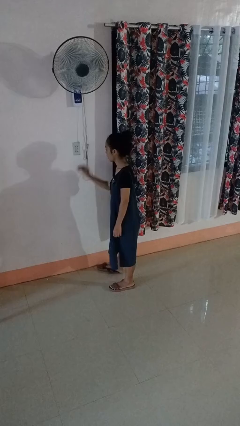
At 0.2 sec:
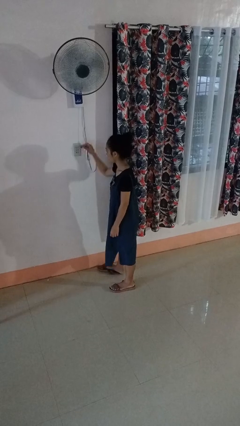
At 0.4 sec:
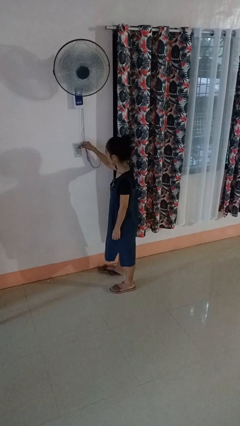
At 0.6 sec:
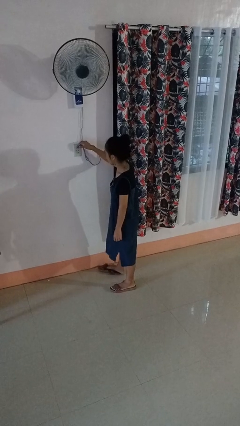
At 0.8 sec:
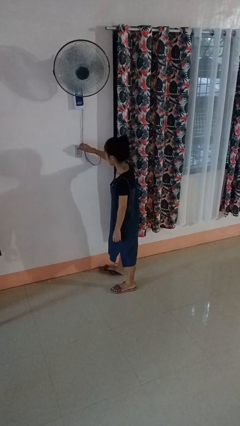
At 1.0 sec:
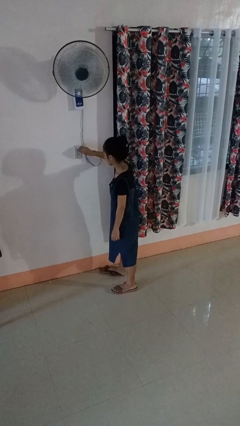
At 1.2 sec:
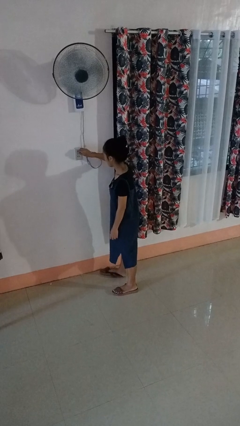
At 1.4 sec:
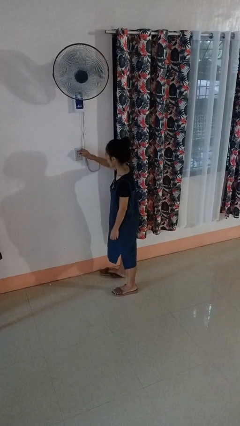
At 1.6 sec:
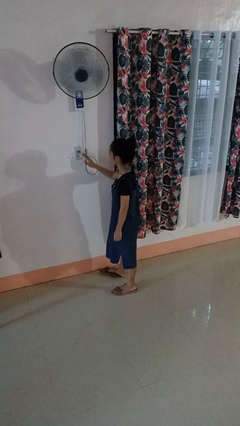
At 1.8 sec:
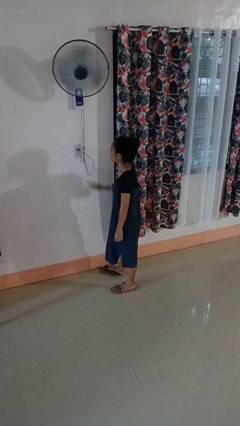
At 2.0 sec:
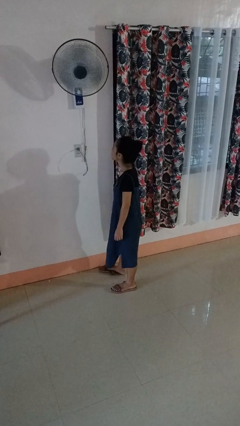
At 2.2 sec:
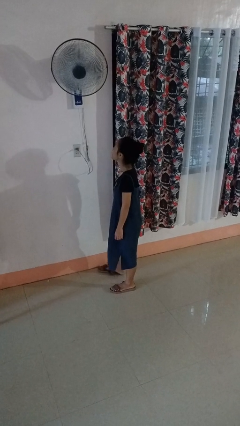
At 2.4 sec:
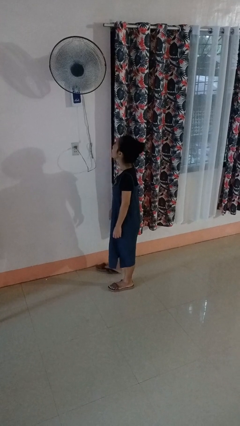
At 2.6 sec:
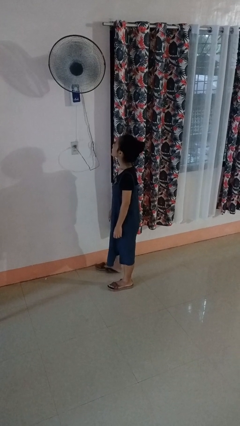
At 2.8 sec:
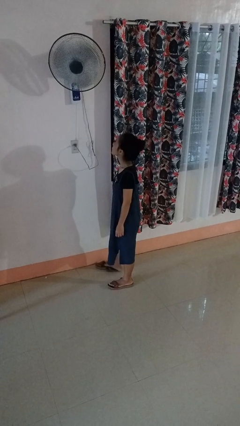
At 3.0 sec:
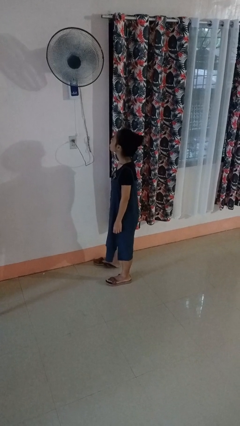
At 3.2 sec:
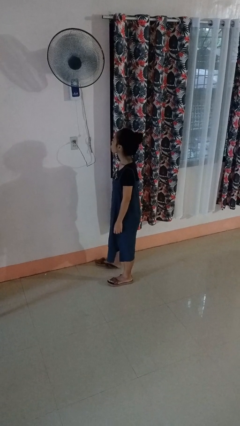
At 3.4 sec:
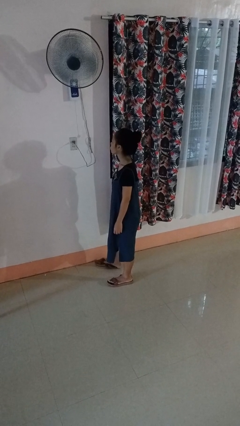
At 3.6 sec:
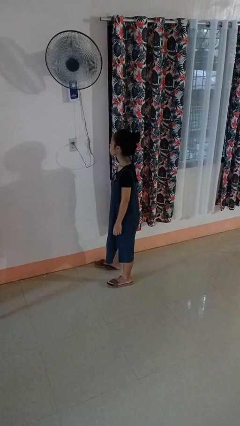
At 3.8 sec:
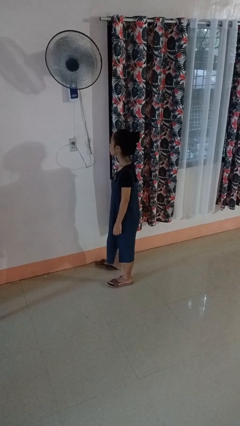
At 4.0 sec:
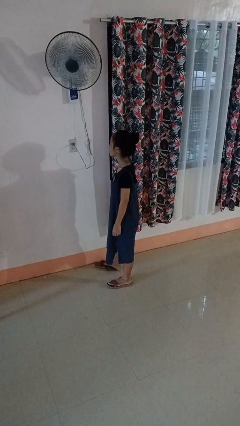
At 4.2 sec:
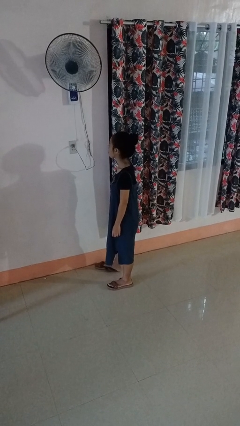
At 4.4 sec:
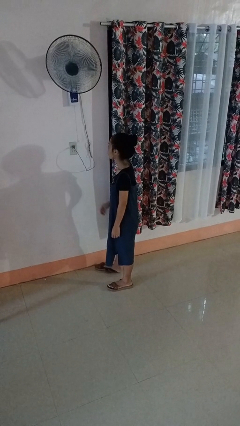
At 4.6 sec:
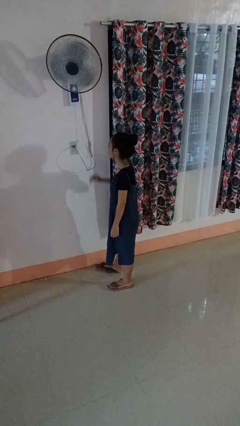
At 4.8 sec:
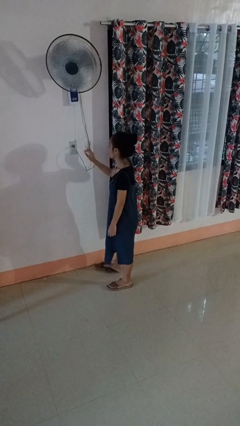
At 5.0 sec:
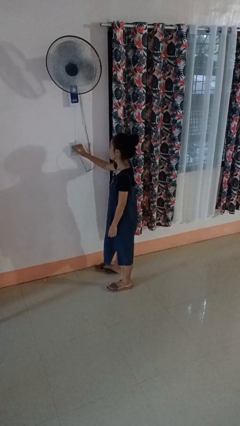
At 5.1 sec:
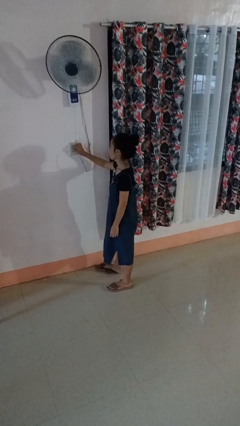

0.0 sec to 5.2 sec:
person plugs into electrical socket

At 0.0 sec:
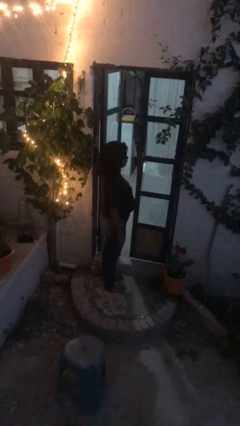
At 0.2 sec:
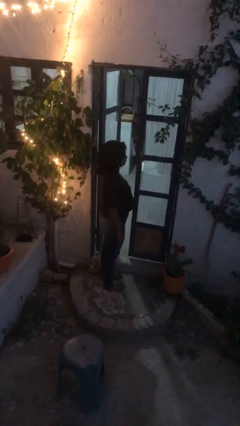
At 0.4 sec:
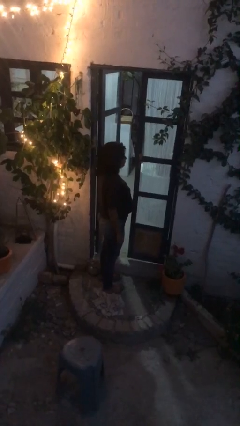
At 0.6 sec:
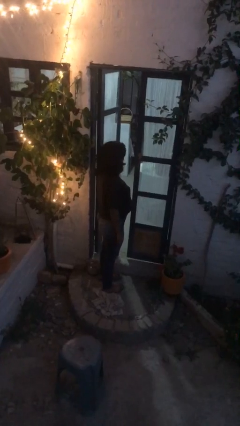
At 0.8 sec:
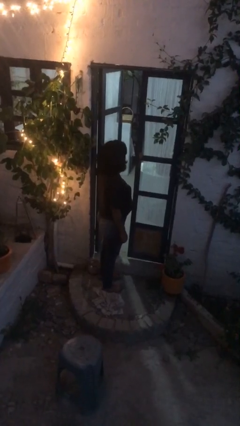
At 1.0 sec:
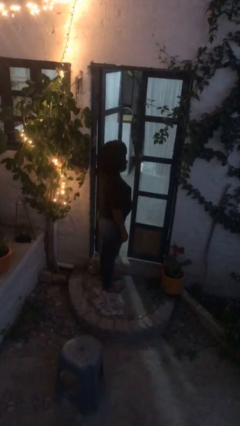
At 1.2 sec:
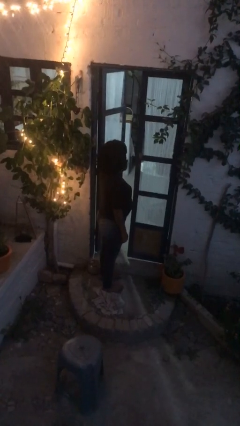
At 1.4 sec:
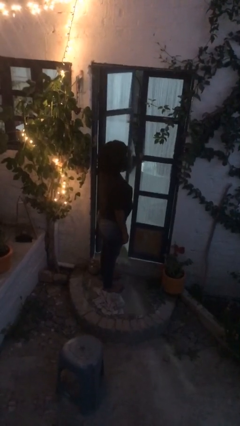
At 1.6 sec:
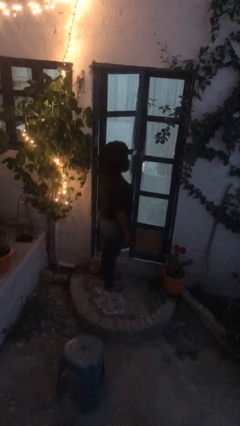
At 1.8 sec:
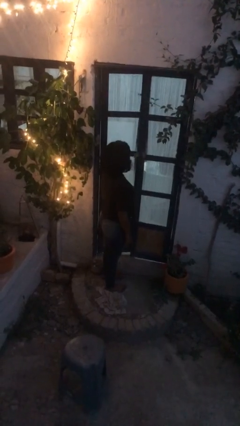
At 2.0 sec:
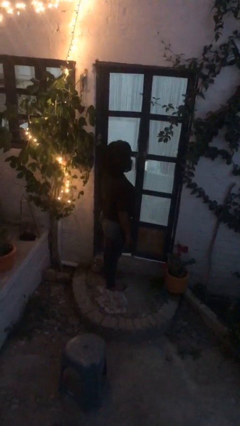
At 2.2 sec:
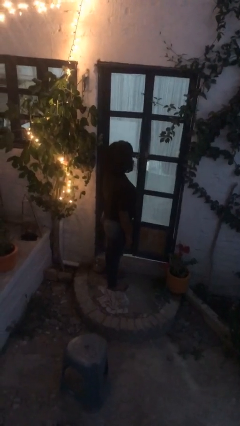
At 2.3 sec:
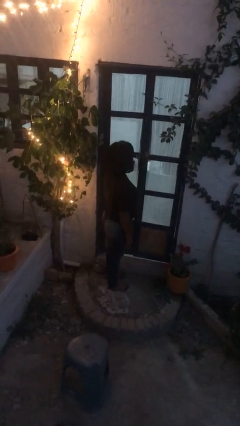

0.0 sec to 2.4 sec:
person closes facility door

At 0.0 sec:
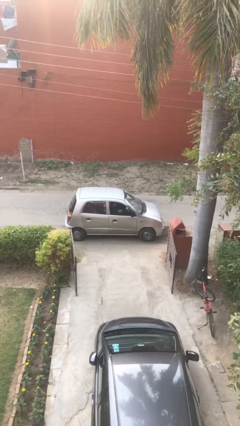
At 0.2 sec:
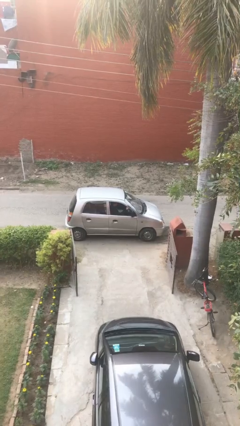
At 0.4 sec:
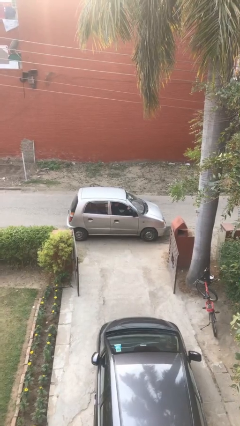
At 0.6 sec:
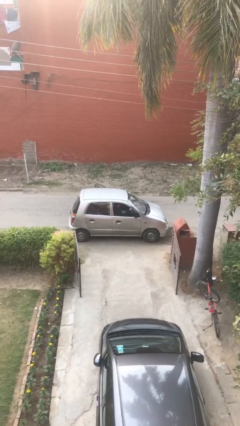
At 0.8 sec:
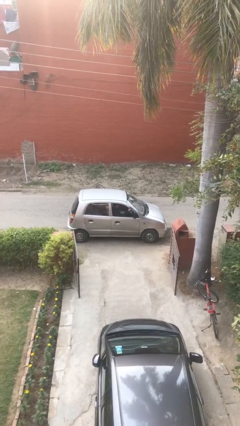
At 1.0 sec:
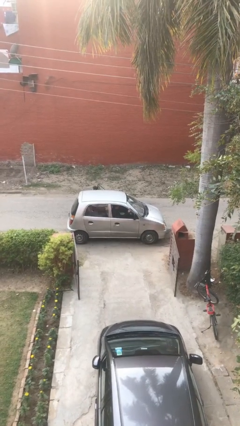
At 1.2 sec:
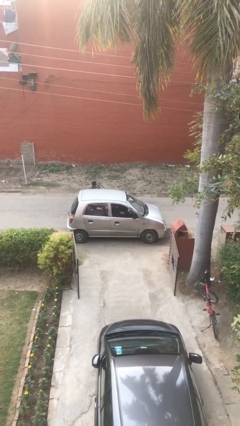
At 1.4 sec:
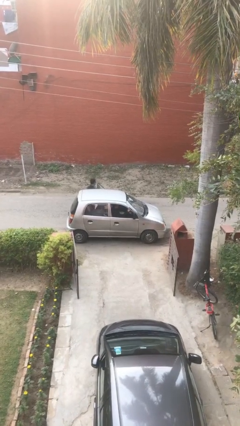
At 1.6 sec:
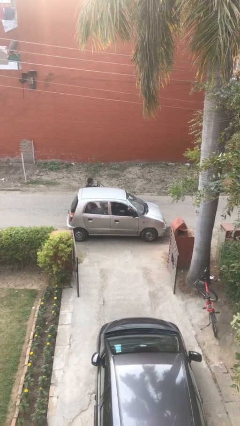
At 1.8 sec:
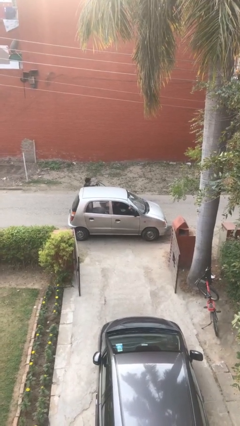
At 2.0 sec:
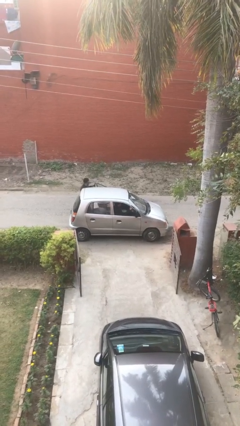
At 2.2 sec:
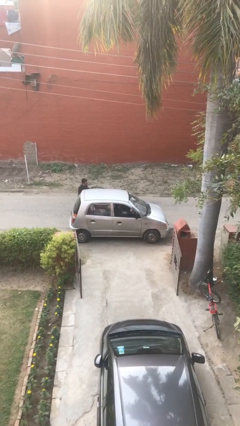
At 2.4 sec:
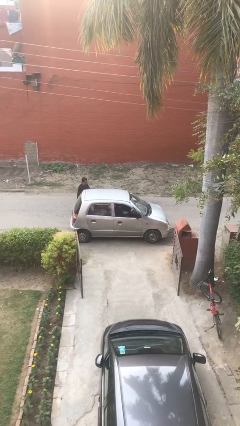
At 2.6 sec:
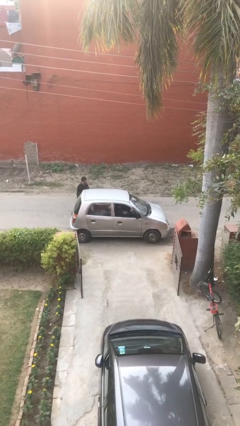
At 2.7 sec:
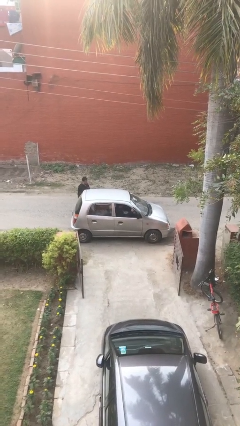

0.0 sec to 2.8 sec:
car drops off person

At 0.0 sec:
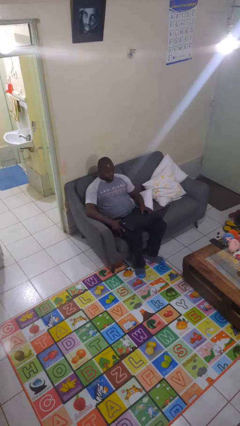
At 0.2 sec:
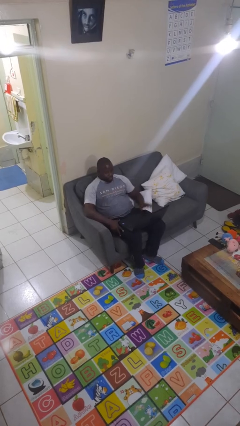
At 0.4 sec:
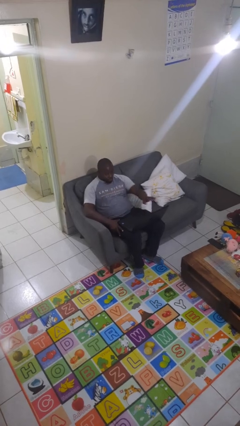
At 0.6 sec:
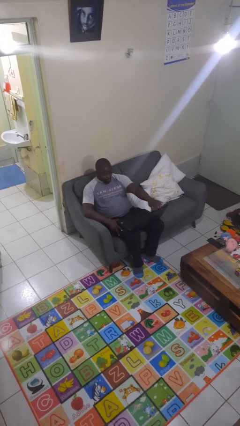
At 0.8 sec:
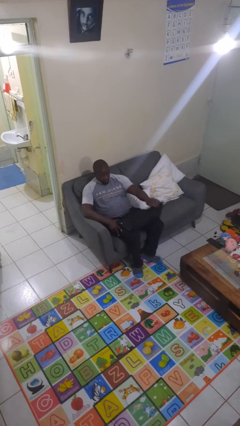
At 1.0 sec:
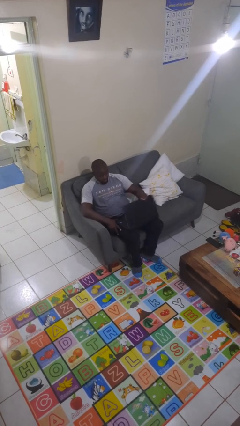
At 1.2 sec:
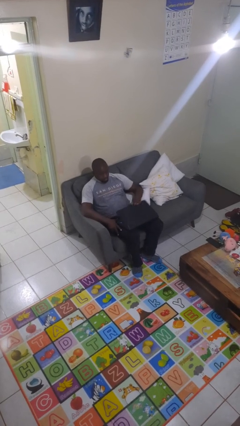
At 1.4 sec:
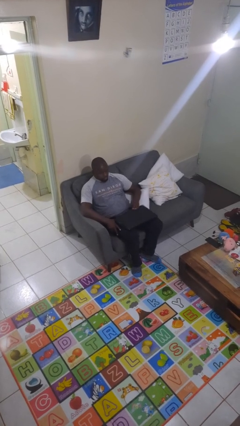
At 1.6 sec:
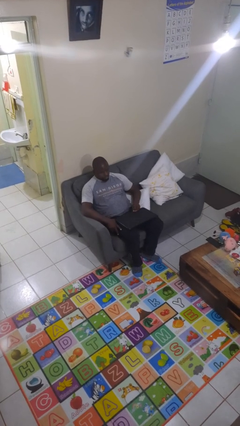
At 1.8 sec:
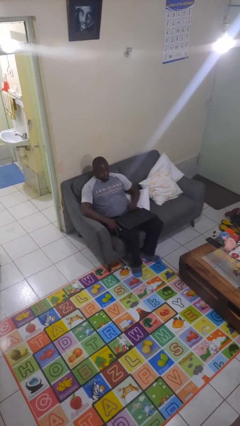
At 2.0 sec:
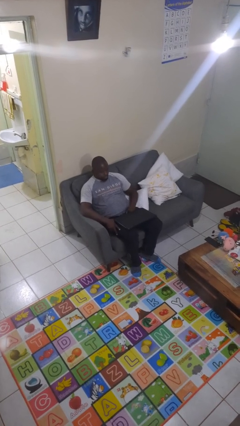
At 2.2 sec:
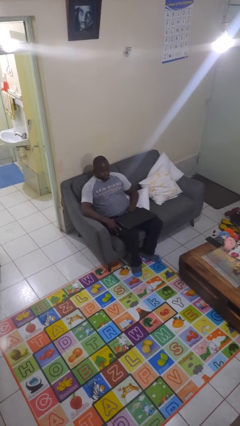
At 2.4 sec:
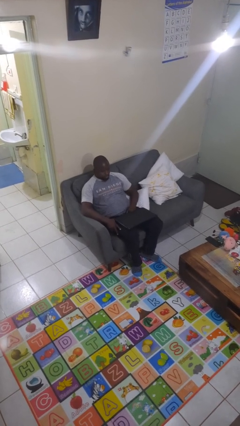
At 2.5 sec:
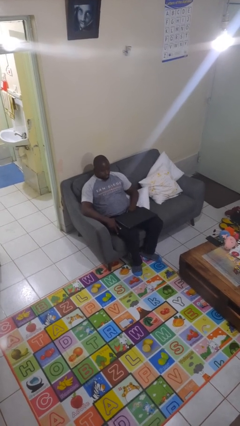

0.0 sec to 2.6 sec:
person closes laptop

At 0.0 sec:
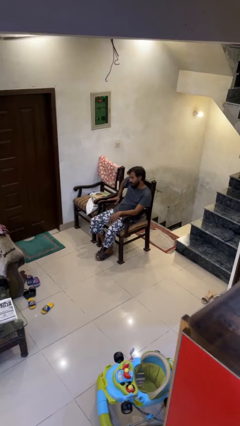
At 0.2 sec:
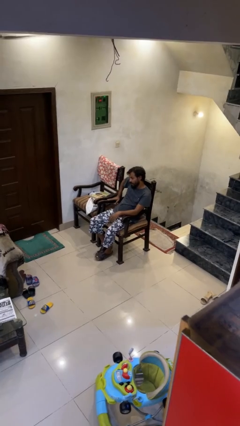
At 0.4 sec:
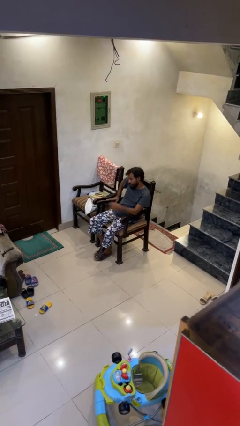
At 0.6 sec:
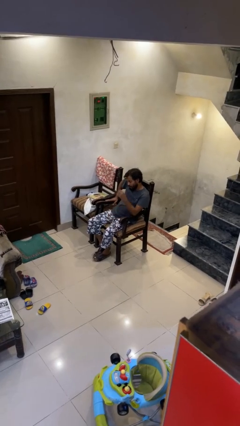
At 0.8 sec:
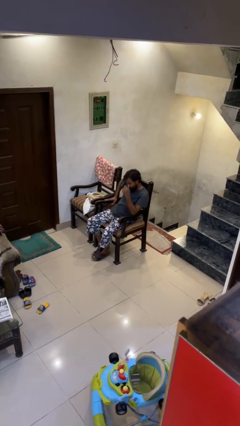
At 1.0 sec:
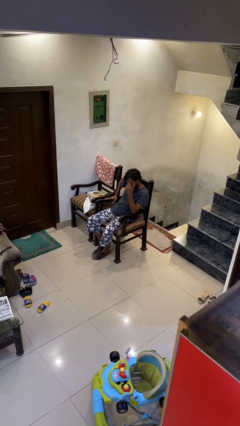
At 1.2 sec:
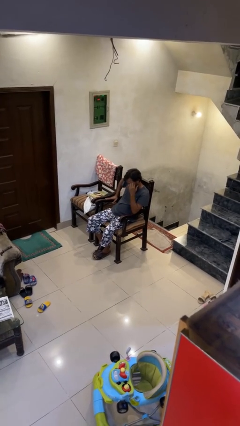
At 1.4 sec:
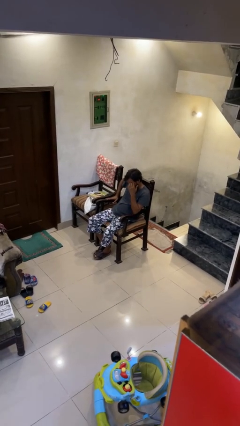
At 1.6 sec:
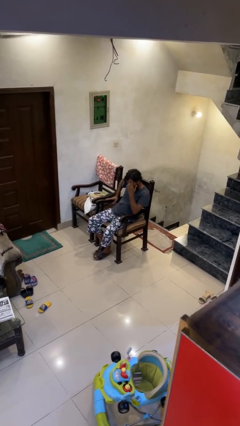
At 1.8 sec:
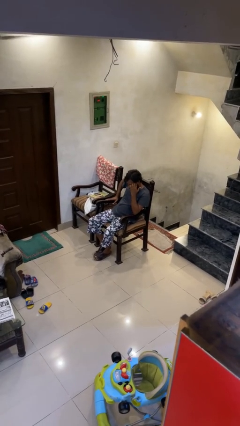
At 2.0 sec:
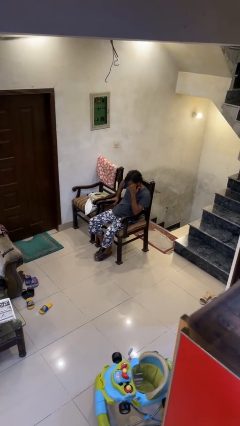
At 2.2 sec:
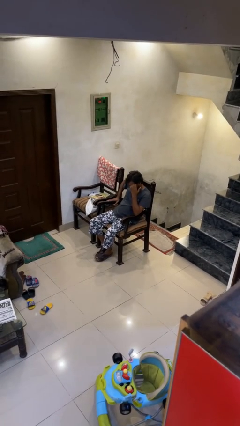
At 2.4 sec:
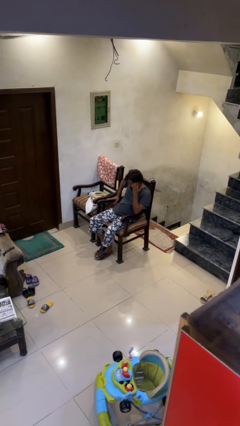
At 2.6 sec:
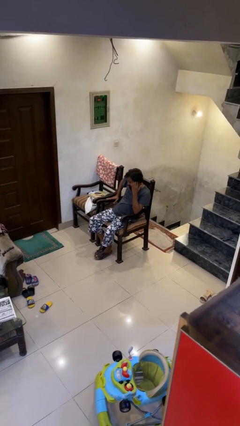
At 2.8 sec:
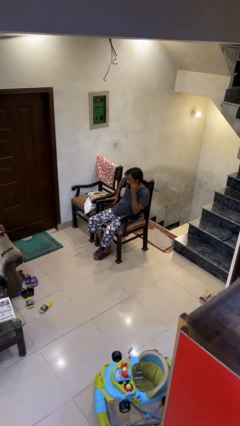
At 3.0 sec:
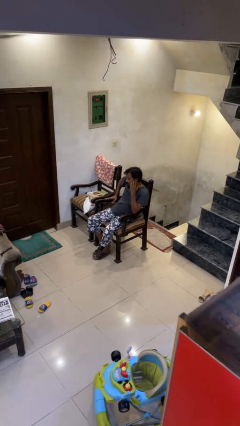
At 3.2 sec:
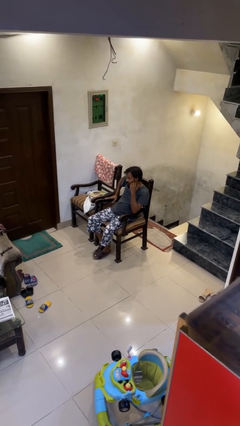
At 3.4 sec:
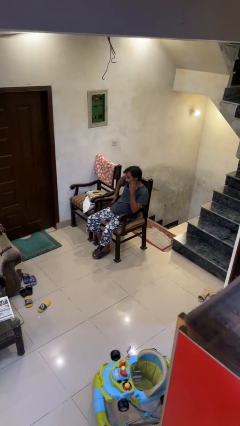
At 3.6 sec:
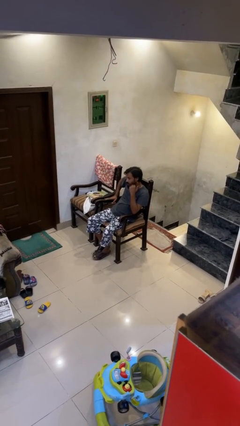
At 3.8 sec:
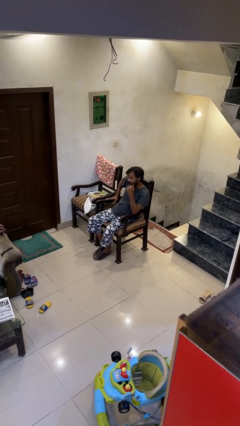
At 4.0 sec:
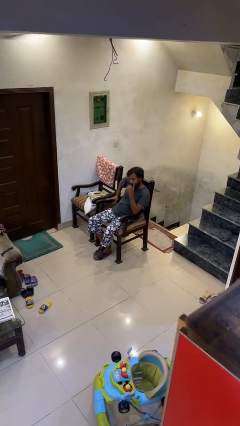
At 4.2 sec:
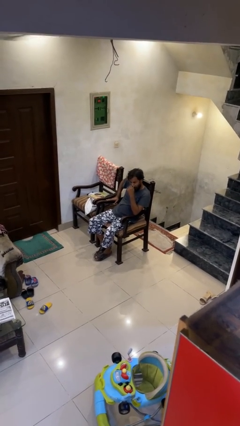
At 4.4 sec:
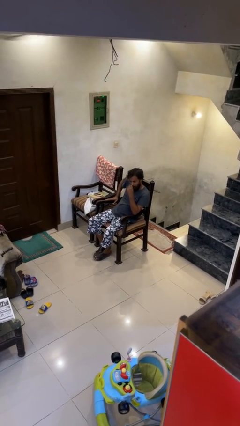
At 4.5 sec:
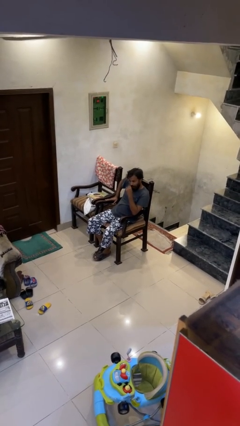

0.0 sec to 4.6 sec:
person scratches face
